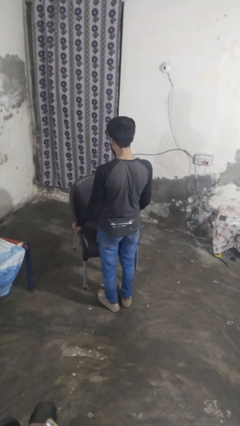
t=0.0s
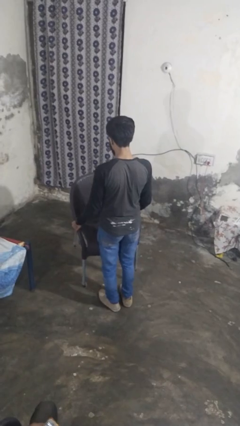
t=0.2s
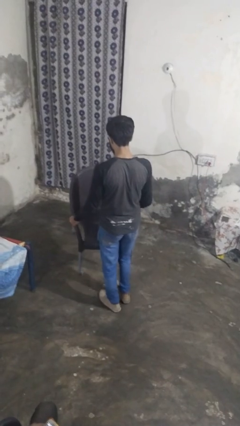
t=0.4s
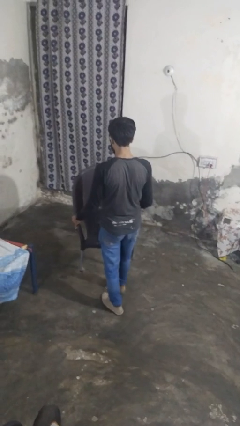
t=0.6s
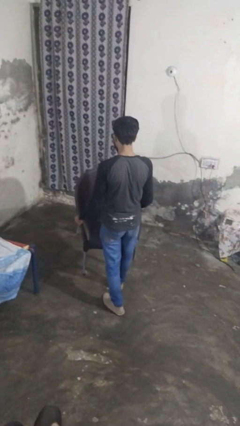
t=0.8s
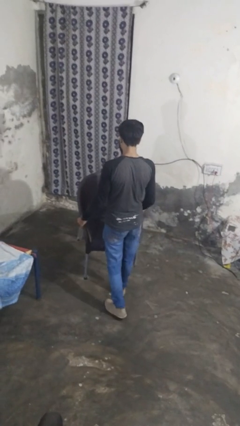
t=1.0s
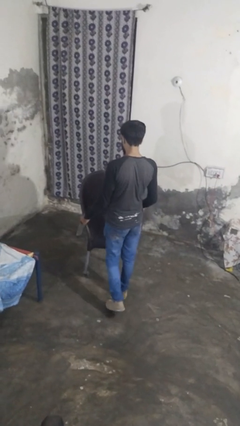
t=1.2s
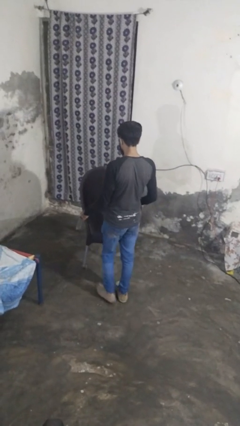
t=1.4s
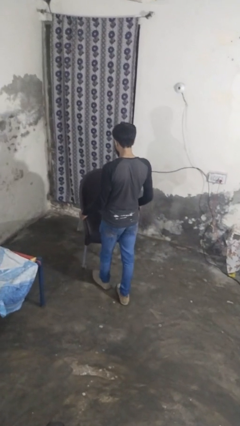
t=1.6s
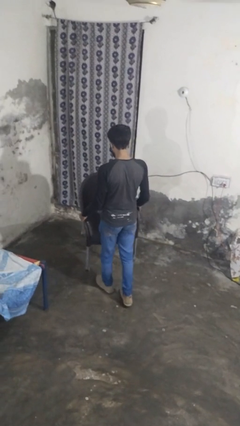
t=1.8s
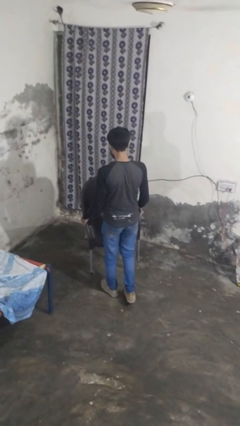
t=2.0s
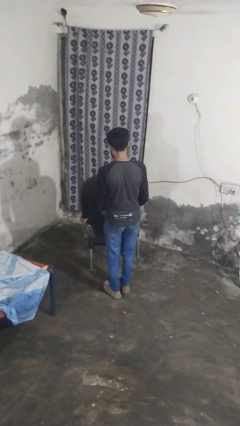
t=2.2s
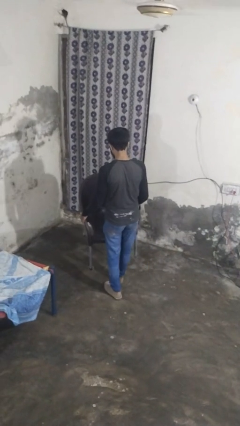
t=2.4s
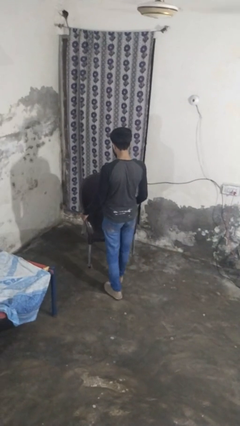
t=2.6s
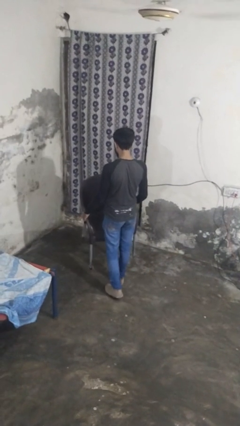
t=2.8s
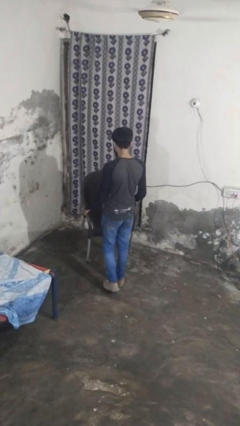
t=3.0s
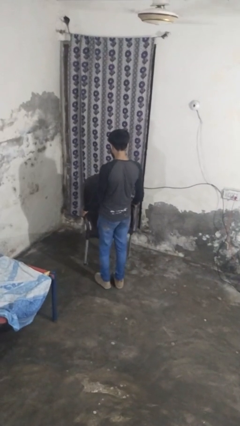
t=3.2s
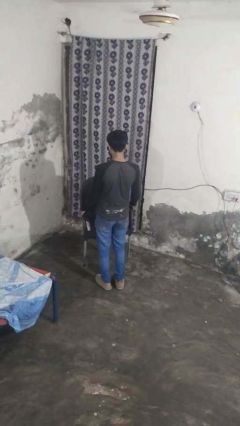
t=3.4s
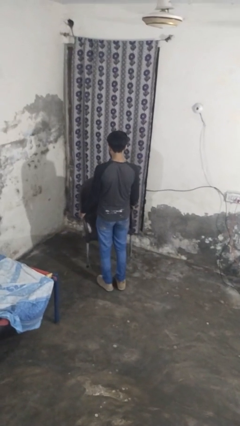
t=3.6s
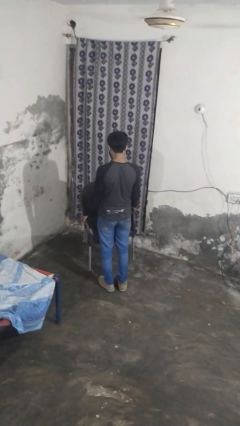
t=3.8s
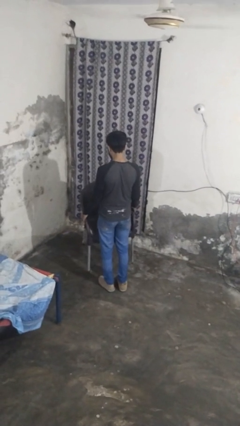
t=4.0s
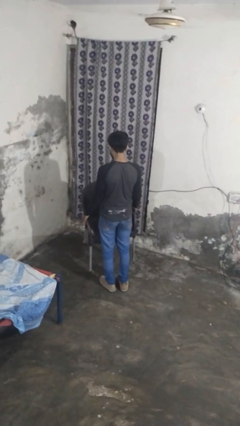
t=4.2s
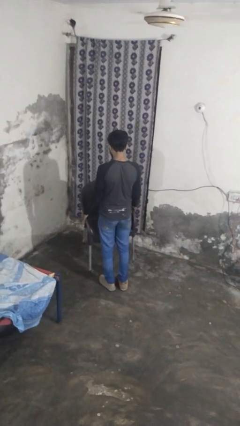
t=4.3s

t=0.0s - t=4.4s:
person carries furniture

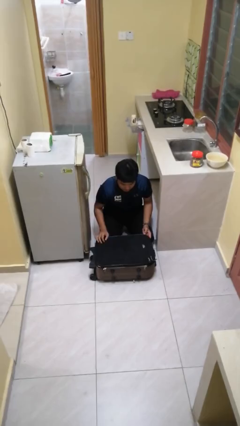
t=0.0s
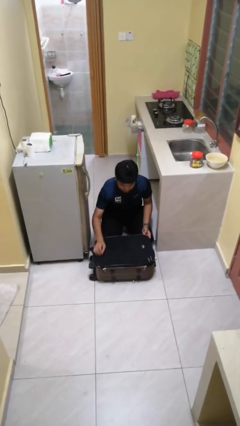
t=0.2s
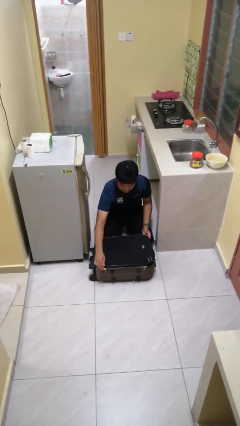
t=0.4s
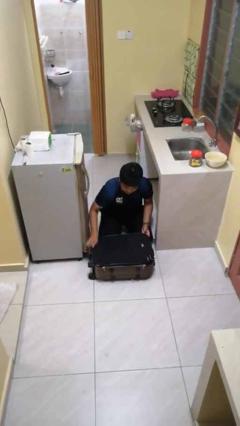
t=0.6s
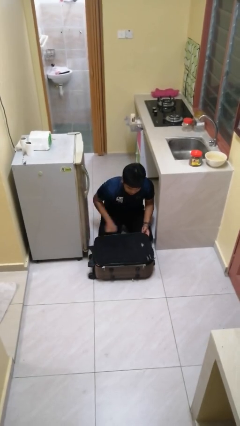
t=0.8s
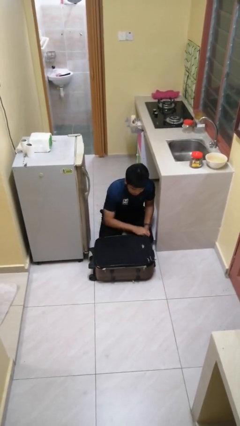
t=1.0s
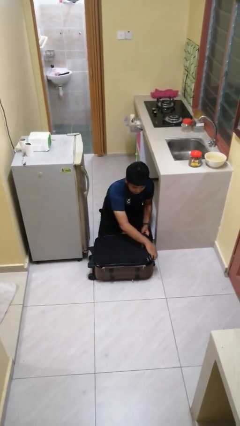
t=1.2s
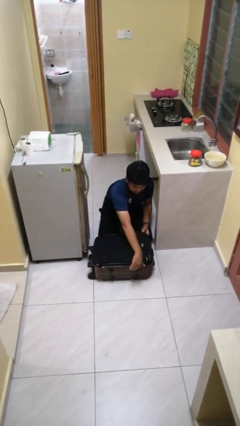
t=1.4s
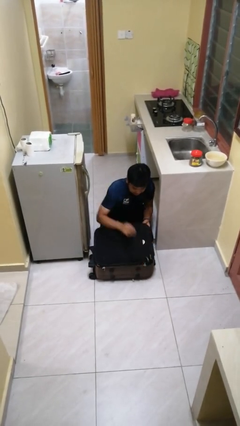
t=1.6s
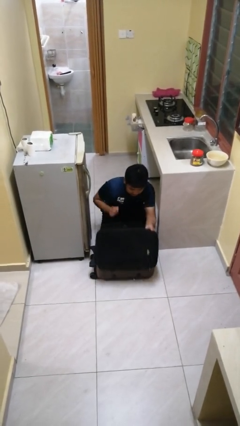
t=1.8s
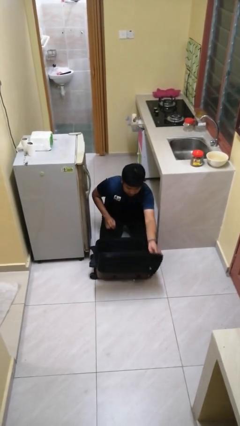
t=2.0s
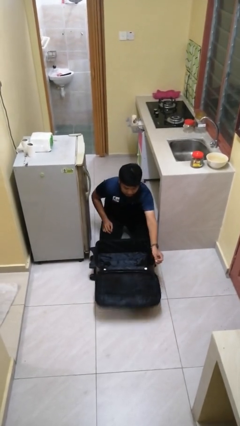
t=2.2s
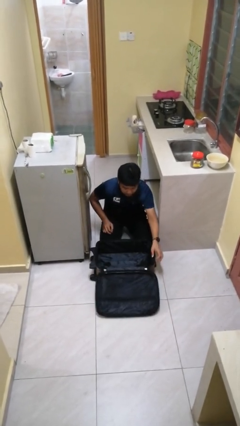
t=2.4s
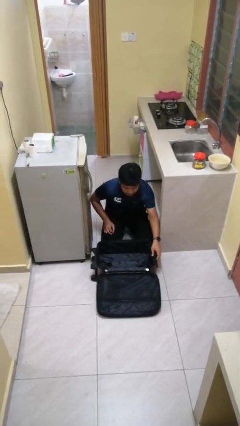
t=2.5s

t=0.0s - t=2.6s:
person opens suitcase

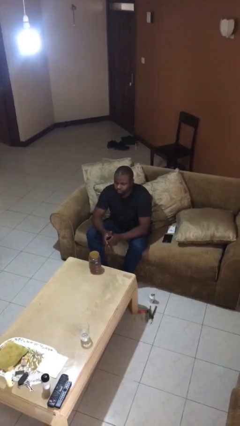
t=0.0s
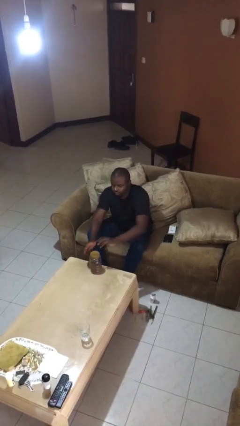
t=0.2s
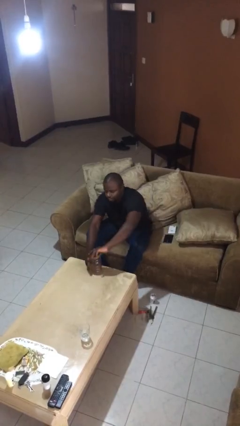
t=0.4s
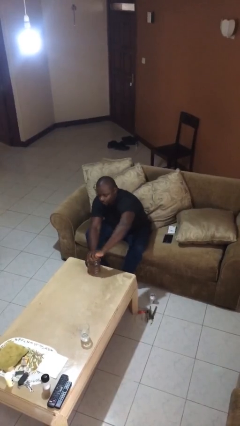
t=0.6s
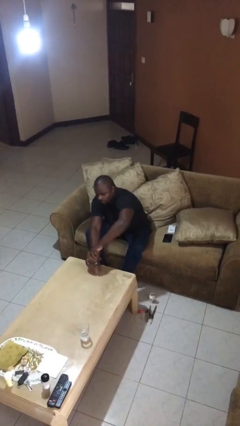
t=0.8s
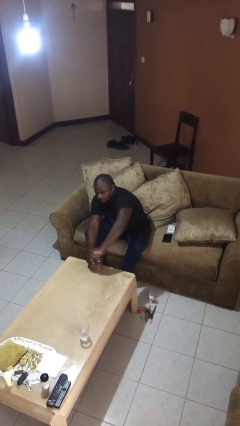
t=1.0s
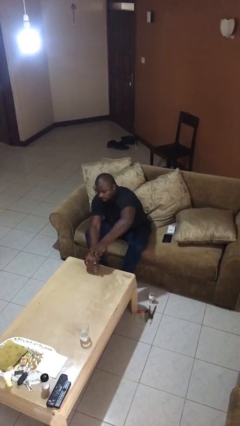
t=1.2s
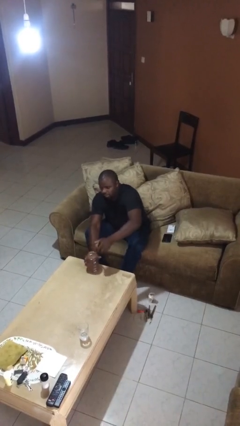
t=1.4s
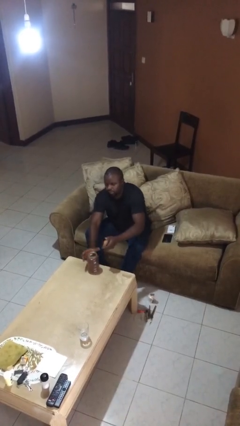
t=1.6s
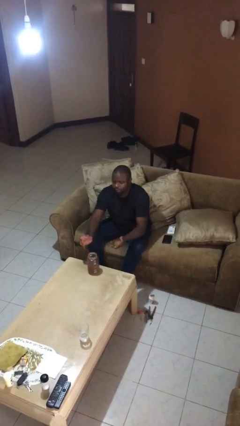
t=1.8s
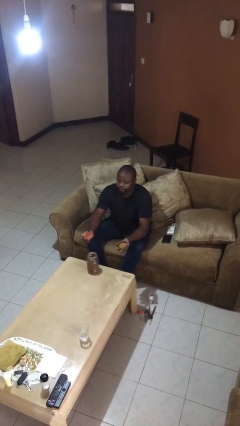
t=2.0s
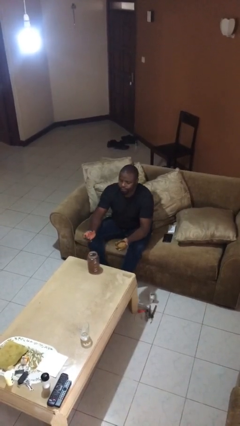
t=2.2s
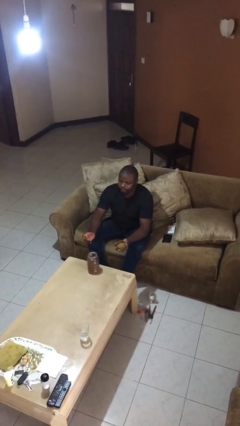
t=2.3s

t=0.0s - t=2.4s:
person opens jar

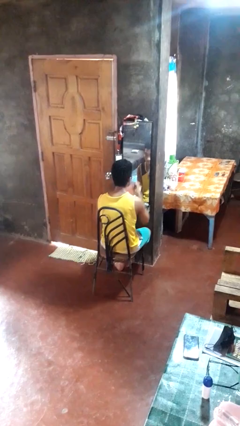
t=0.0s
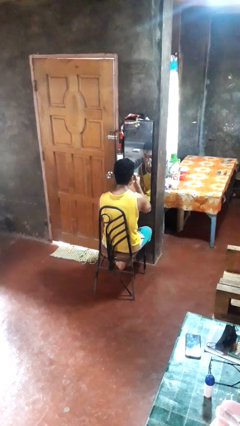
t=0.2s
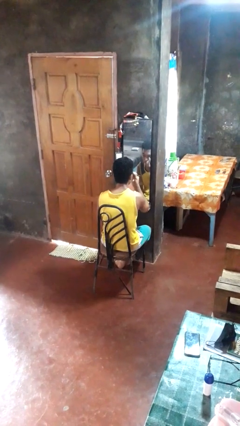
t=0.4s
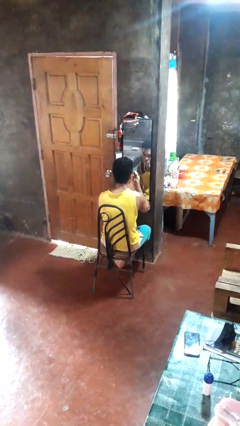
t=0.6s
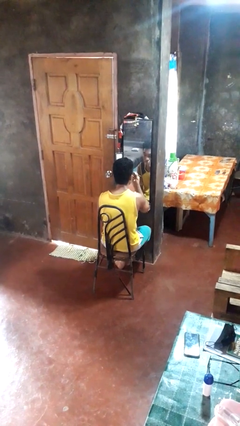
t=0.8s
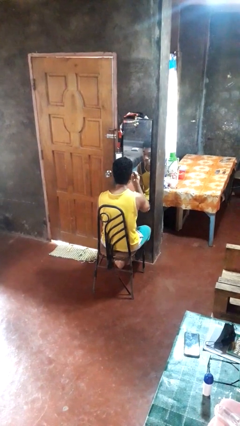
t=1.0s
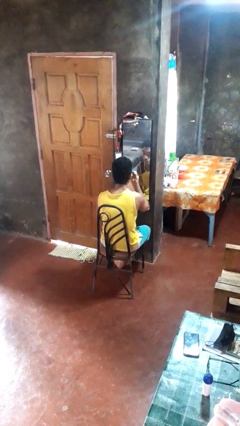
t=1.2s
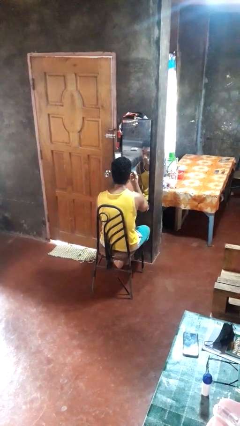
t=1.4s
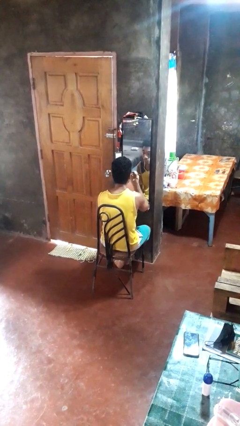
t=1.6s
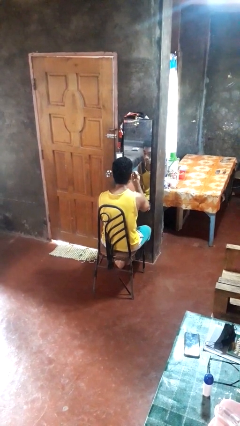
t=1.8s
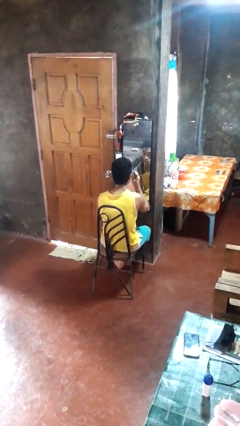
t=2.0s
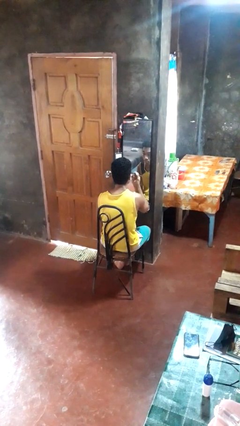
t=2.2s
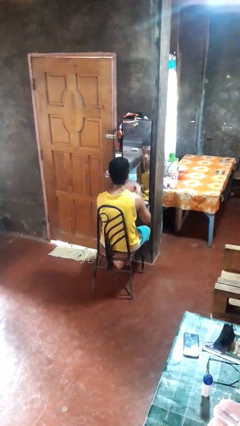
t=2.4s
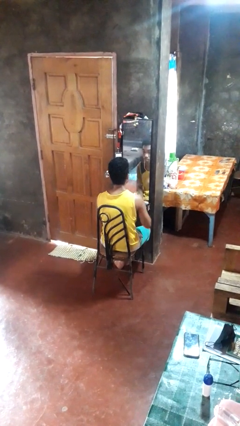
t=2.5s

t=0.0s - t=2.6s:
person applies eye makeup

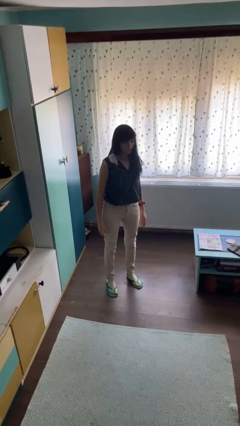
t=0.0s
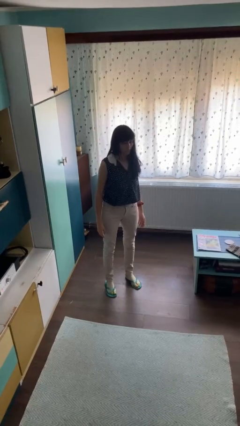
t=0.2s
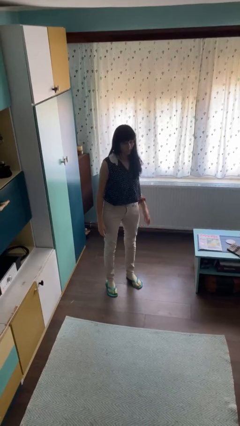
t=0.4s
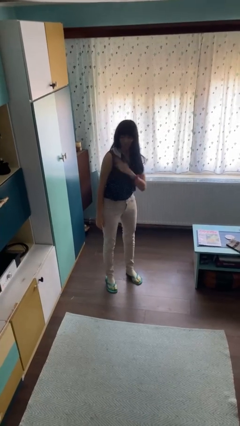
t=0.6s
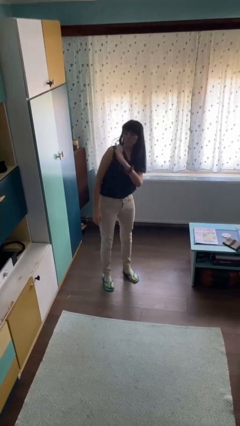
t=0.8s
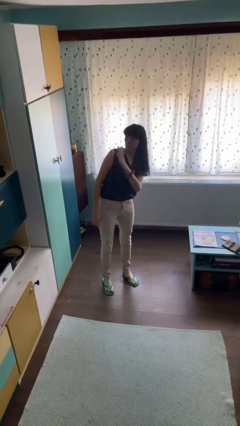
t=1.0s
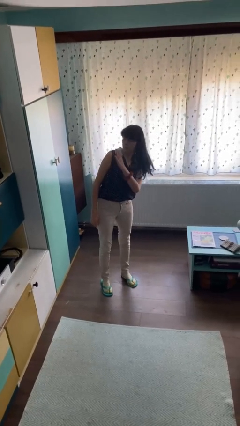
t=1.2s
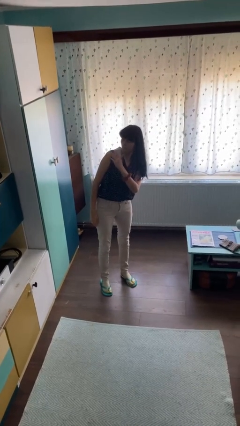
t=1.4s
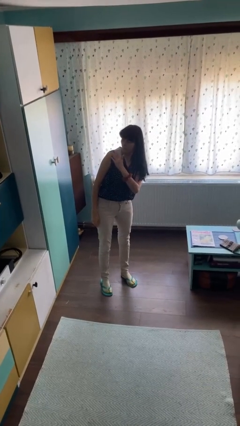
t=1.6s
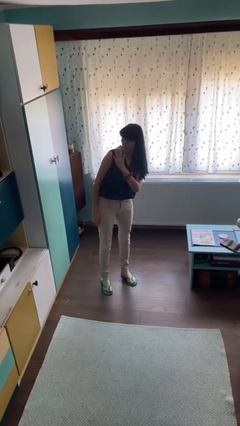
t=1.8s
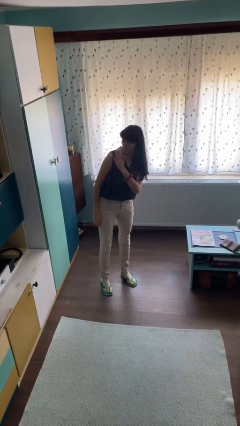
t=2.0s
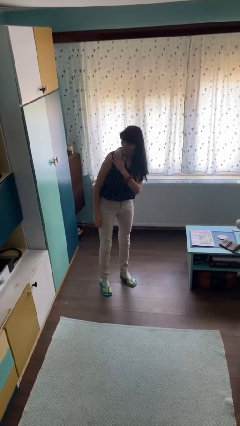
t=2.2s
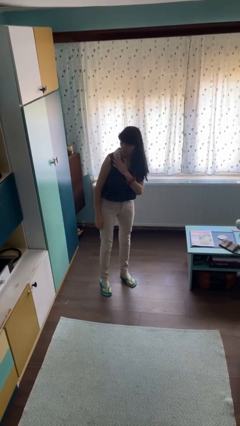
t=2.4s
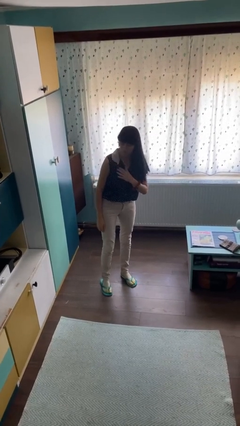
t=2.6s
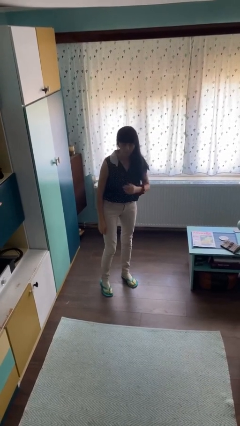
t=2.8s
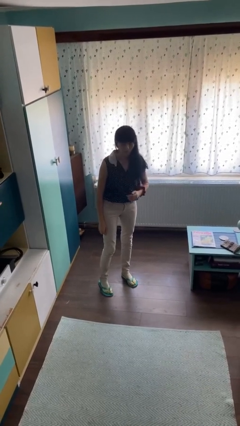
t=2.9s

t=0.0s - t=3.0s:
person swats bug

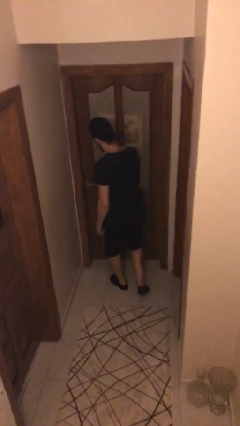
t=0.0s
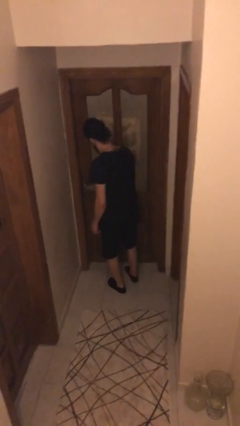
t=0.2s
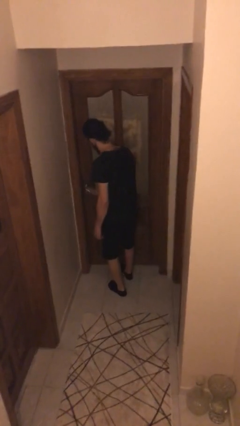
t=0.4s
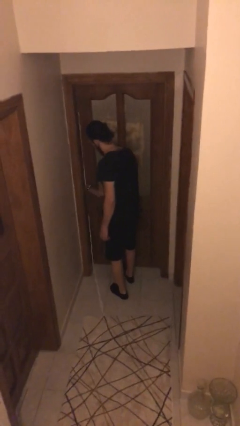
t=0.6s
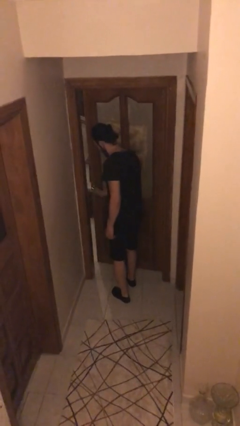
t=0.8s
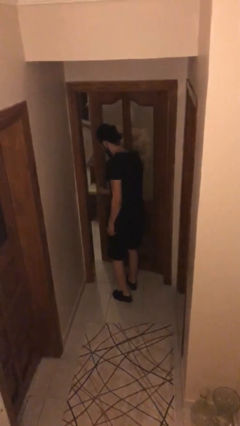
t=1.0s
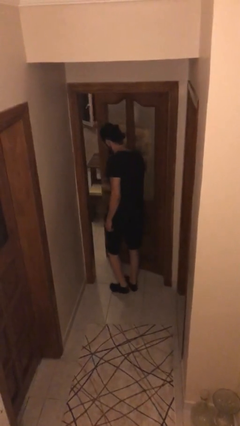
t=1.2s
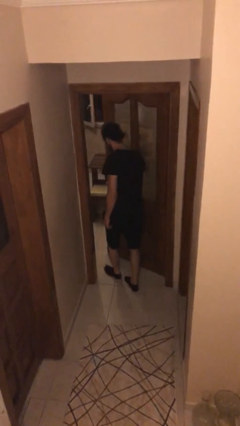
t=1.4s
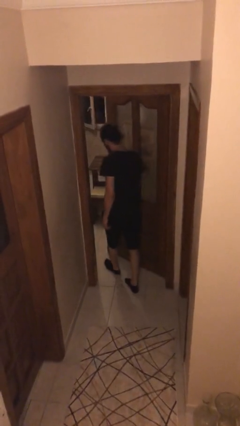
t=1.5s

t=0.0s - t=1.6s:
person opens facility door

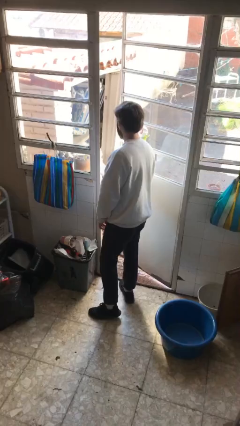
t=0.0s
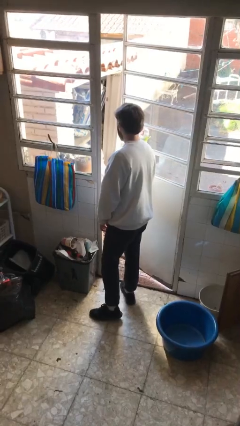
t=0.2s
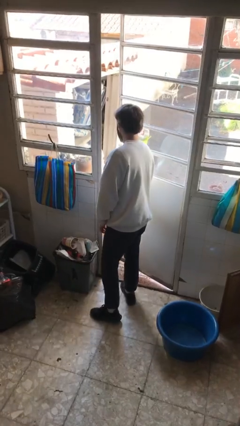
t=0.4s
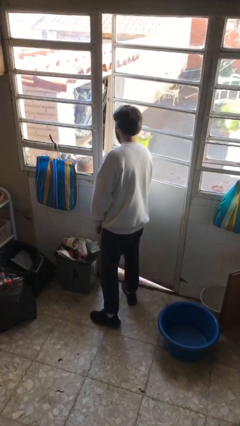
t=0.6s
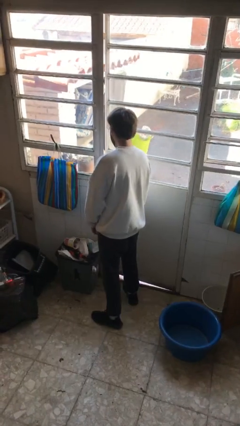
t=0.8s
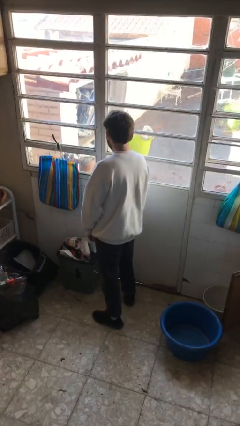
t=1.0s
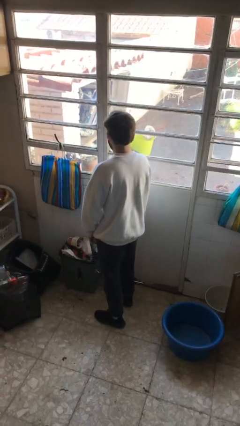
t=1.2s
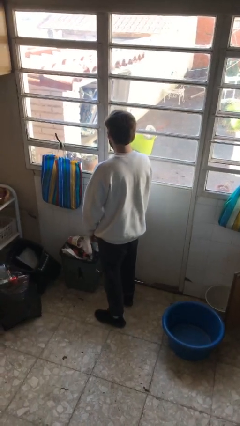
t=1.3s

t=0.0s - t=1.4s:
person closes facility door
